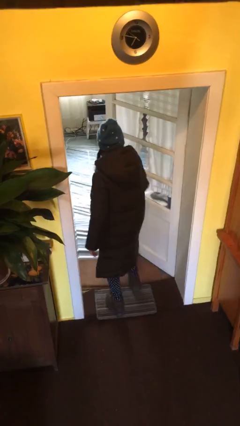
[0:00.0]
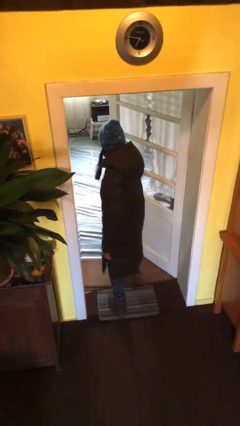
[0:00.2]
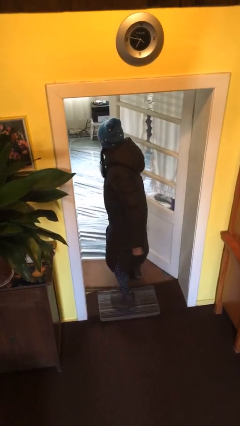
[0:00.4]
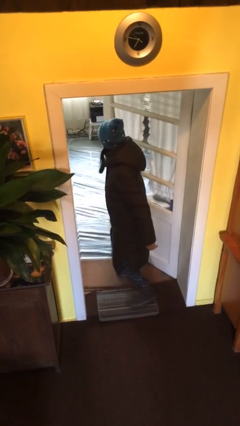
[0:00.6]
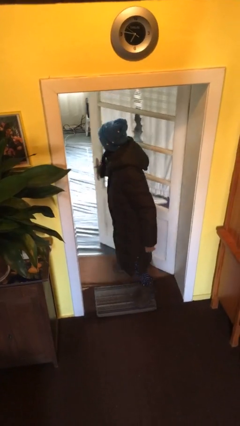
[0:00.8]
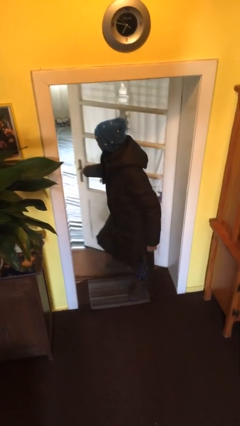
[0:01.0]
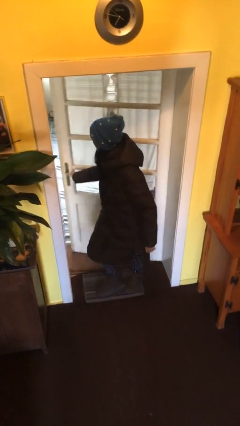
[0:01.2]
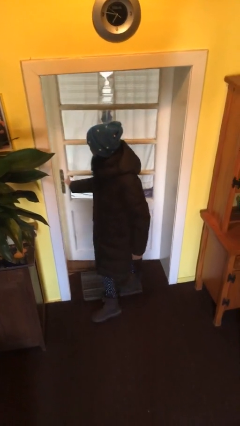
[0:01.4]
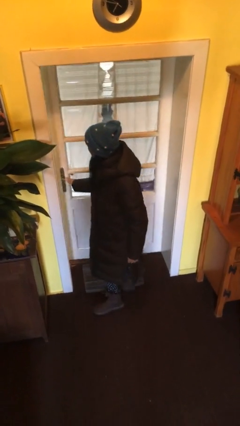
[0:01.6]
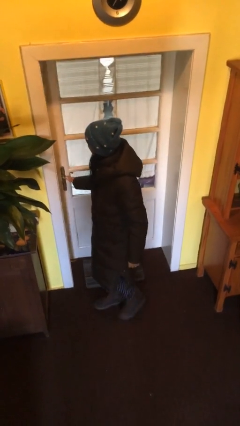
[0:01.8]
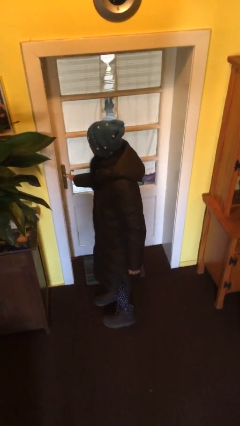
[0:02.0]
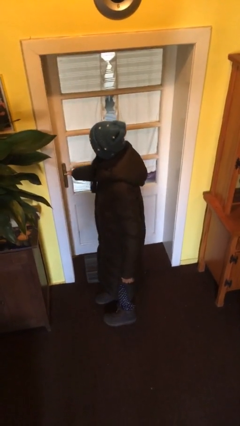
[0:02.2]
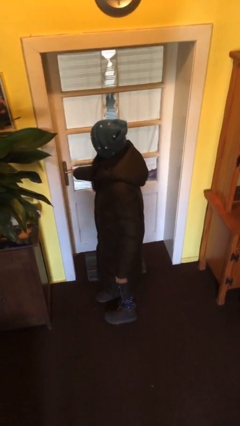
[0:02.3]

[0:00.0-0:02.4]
person closes facility door

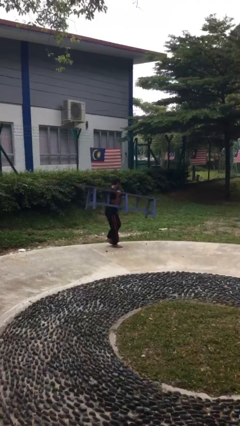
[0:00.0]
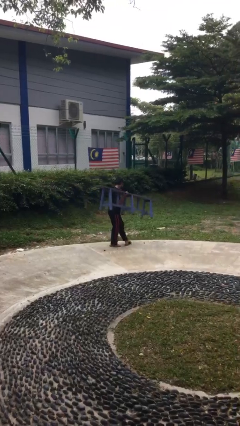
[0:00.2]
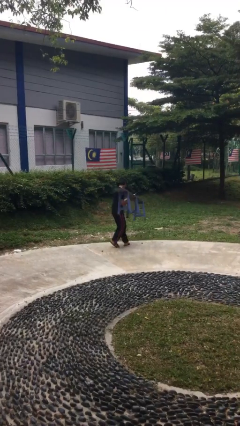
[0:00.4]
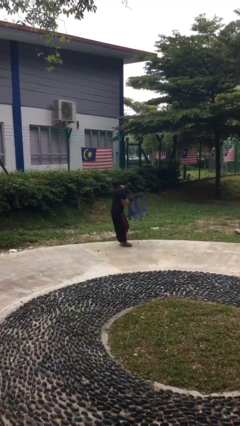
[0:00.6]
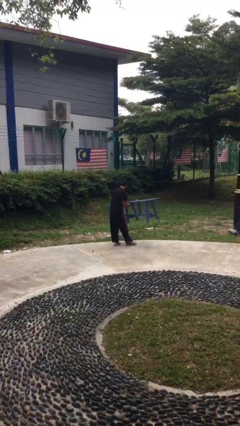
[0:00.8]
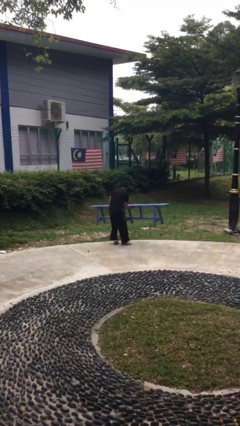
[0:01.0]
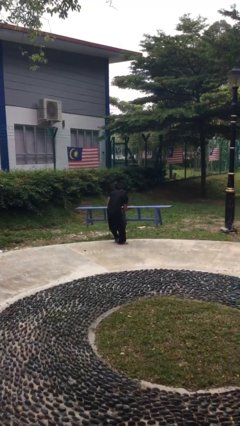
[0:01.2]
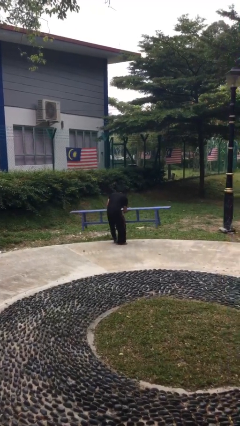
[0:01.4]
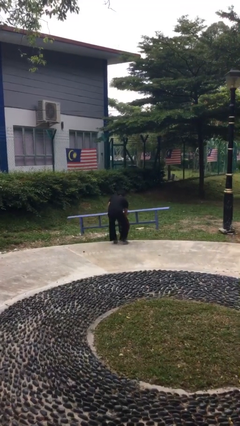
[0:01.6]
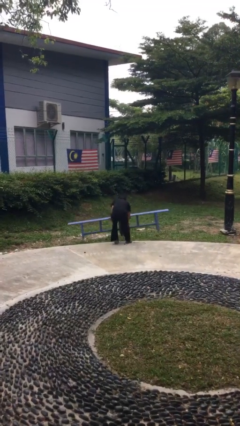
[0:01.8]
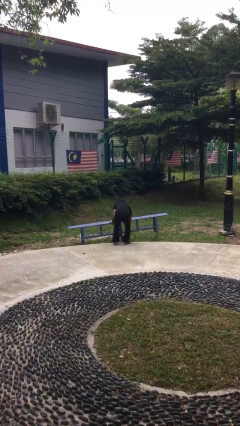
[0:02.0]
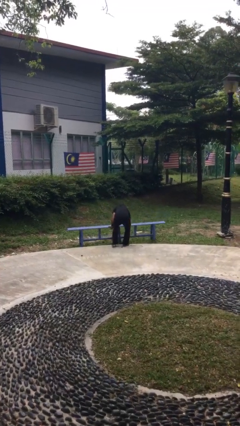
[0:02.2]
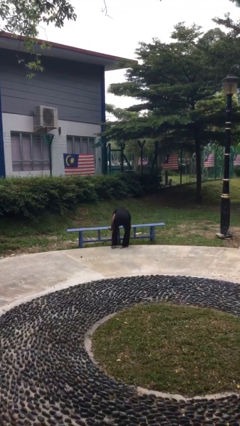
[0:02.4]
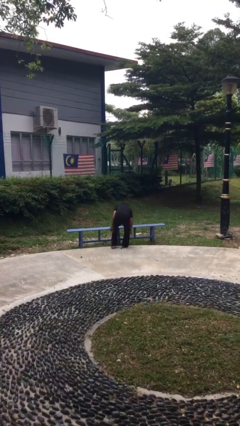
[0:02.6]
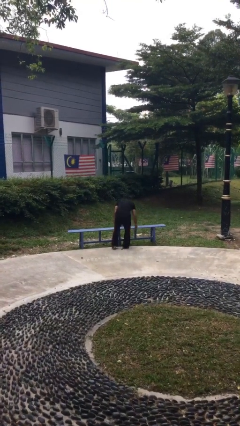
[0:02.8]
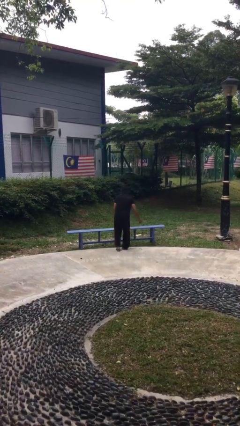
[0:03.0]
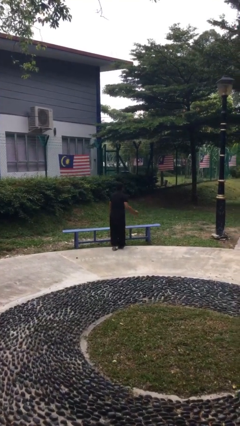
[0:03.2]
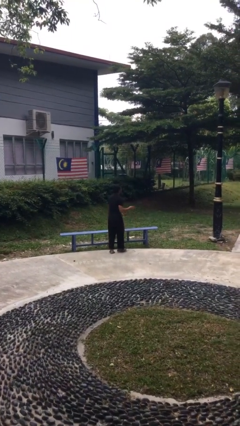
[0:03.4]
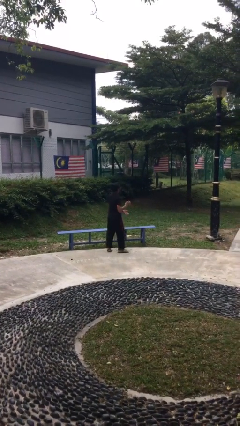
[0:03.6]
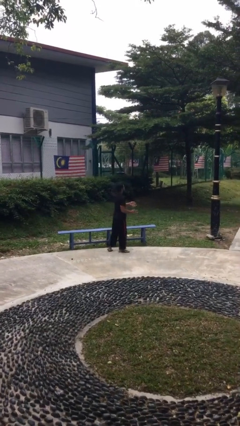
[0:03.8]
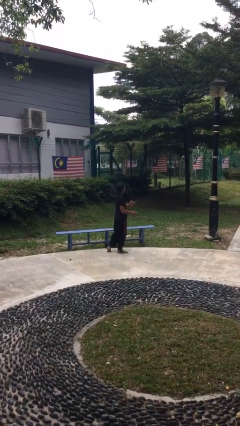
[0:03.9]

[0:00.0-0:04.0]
person puts down object on floor

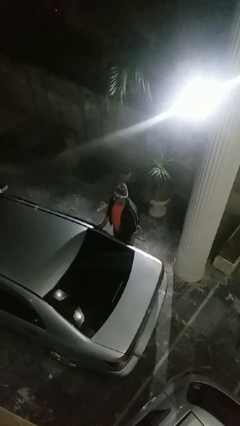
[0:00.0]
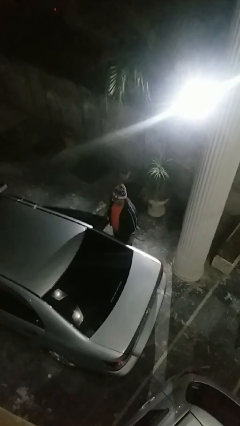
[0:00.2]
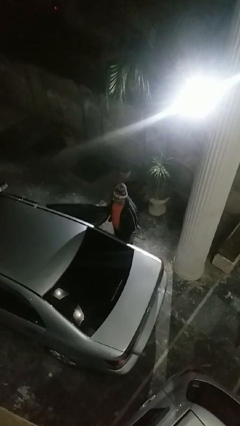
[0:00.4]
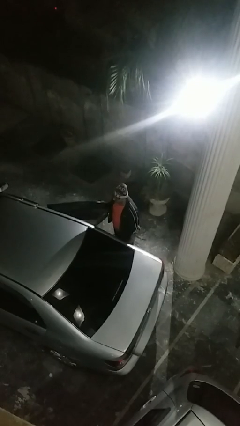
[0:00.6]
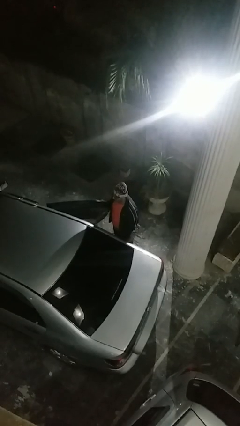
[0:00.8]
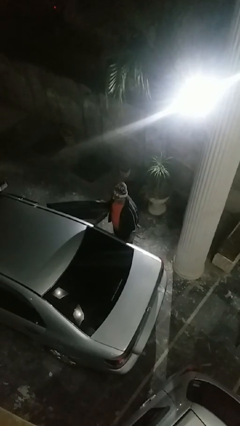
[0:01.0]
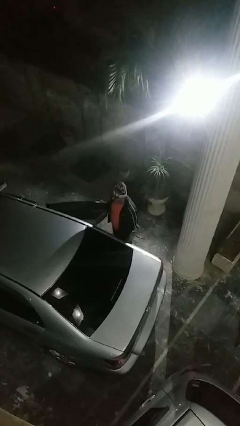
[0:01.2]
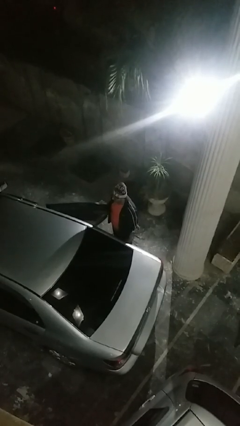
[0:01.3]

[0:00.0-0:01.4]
person opens car door

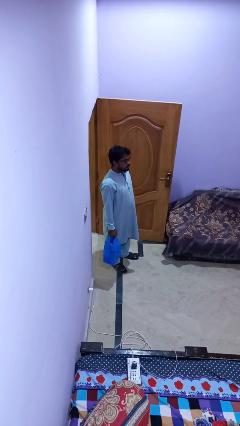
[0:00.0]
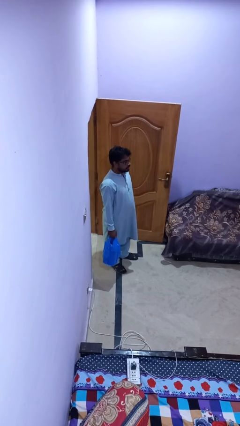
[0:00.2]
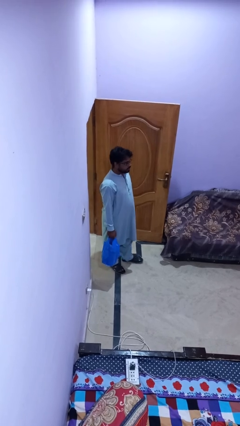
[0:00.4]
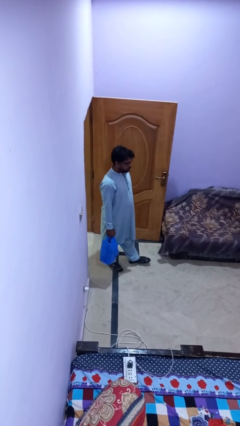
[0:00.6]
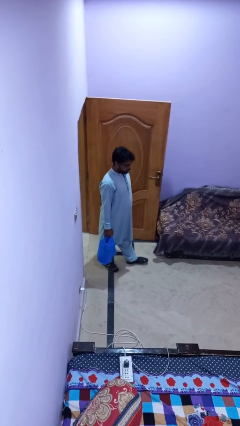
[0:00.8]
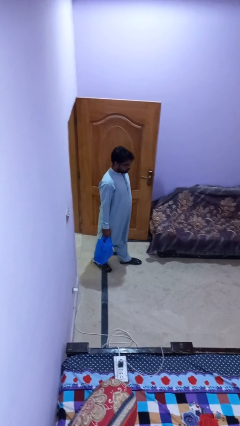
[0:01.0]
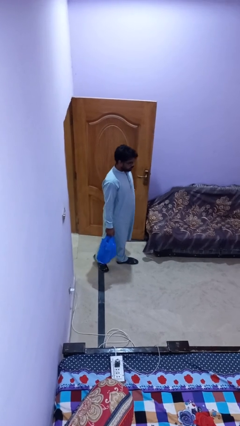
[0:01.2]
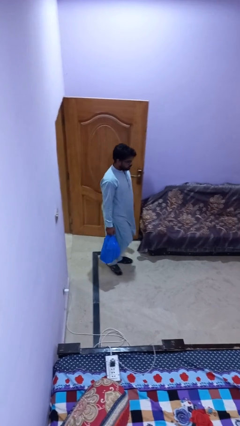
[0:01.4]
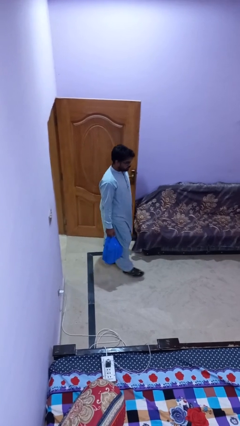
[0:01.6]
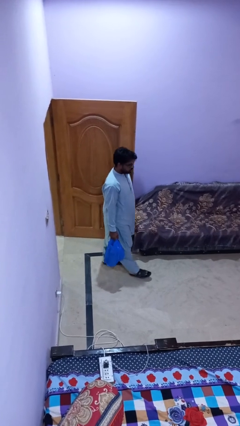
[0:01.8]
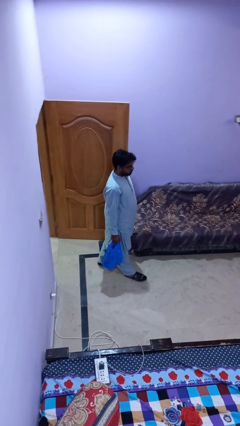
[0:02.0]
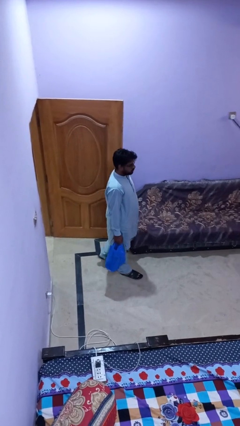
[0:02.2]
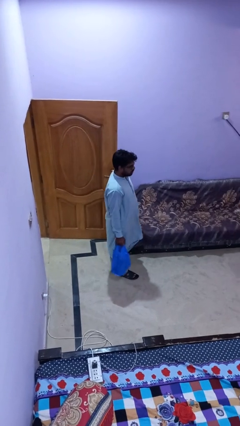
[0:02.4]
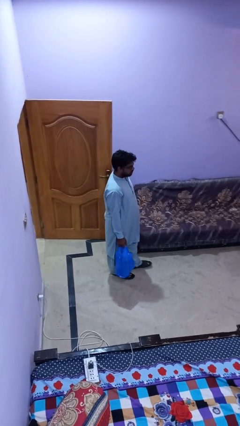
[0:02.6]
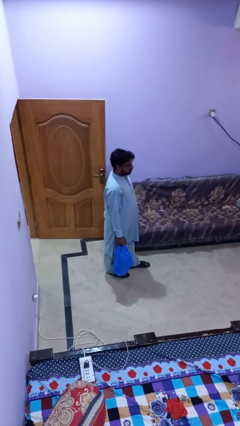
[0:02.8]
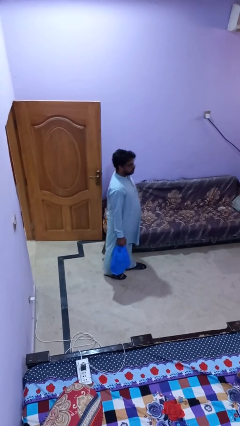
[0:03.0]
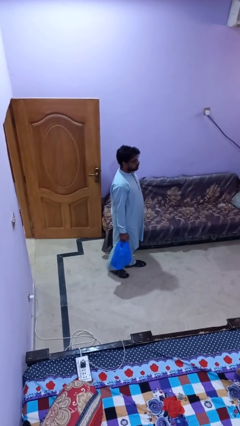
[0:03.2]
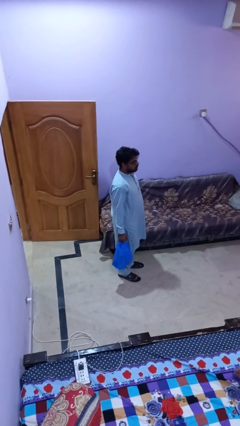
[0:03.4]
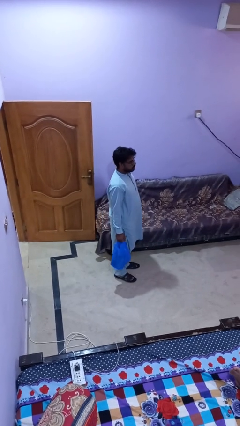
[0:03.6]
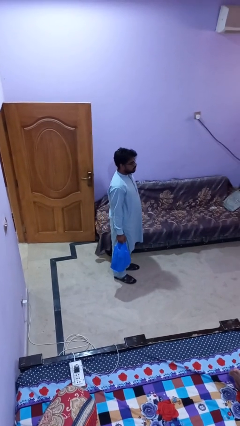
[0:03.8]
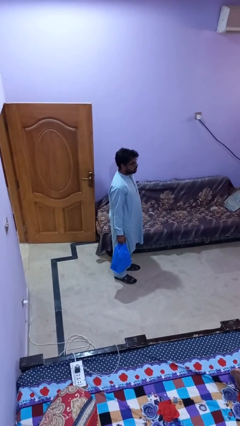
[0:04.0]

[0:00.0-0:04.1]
person carries groceries

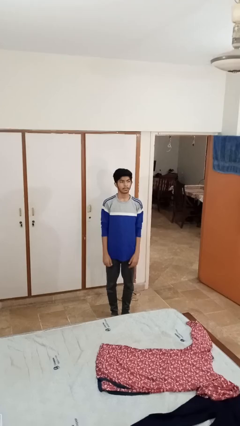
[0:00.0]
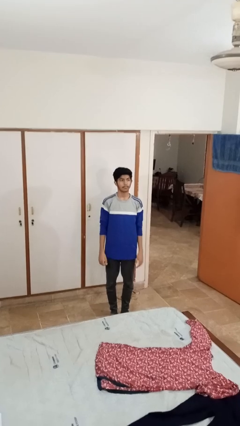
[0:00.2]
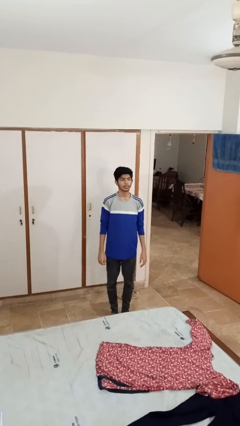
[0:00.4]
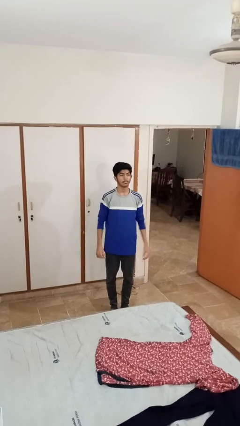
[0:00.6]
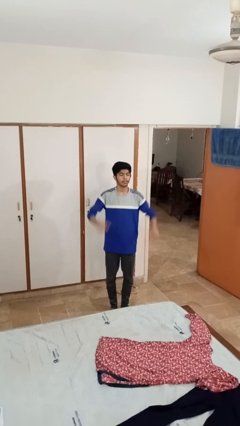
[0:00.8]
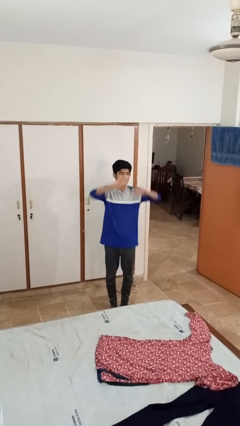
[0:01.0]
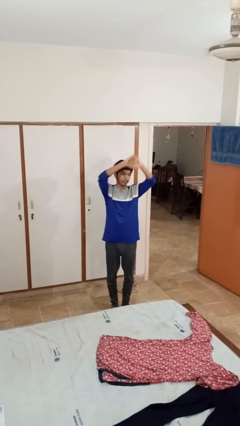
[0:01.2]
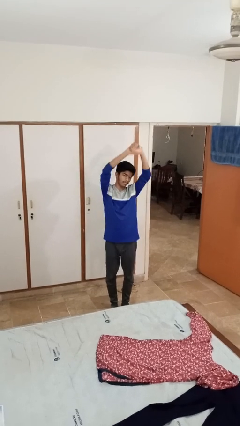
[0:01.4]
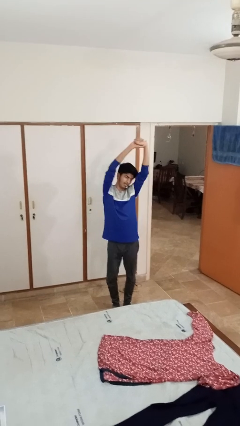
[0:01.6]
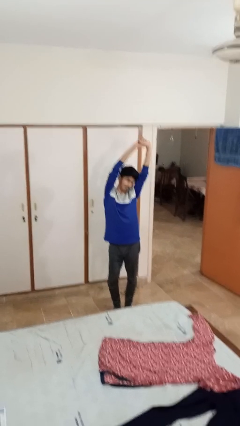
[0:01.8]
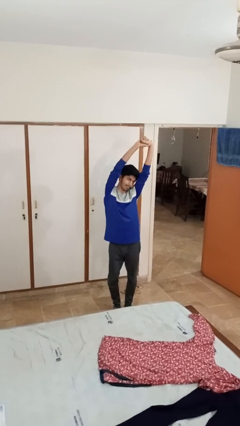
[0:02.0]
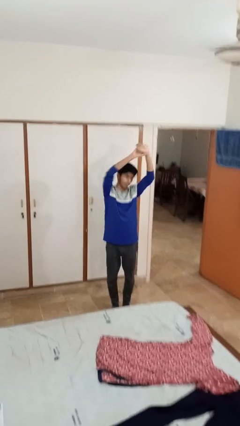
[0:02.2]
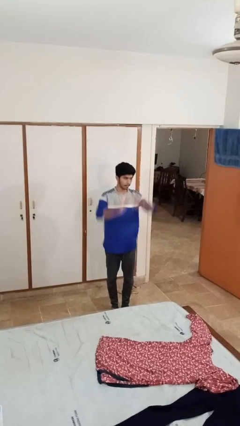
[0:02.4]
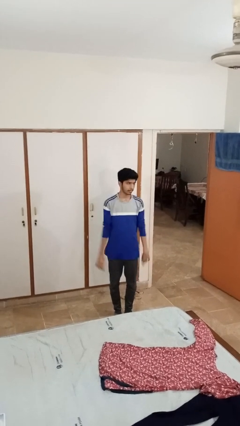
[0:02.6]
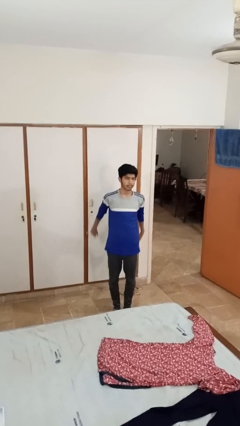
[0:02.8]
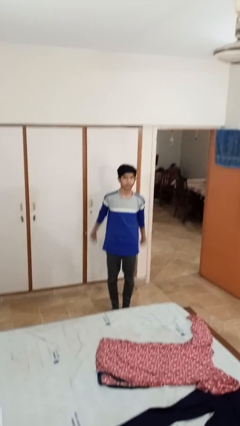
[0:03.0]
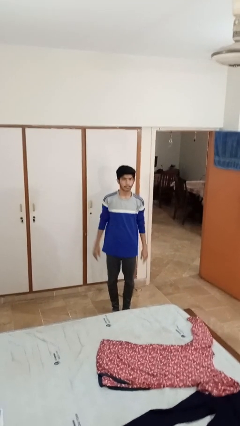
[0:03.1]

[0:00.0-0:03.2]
person stretches arms over head

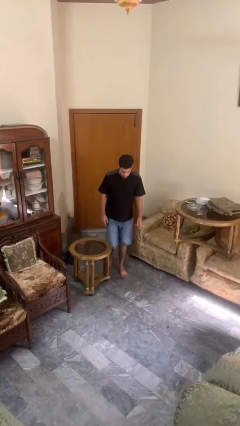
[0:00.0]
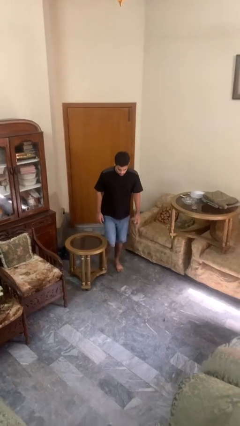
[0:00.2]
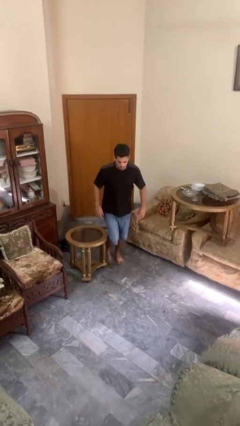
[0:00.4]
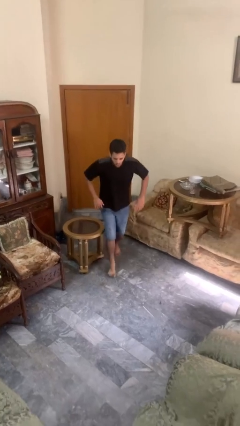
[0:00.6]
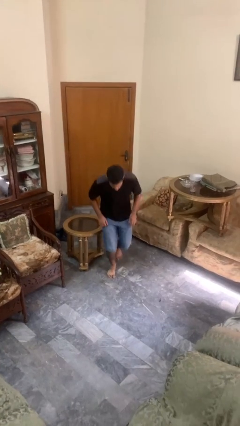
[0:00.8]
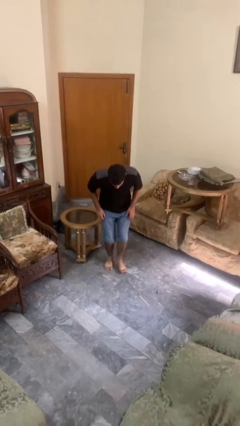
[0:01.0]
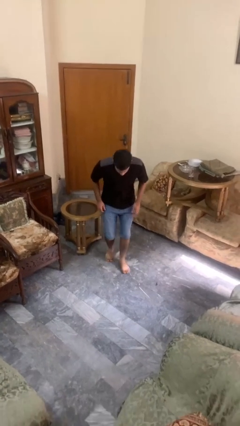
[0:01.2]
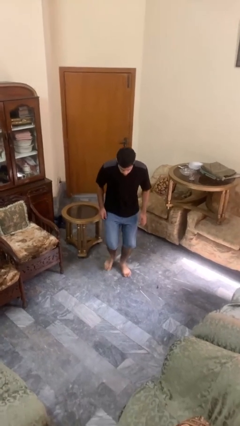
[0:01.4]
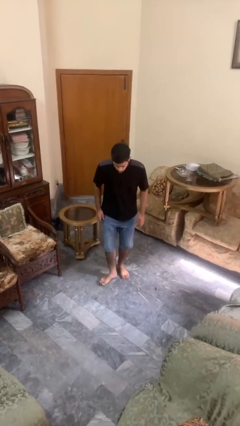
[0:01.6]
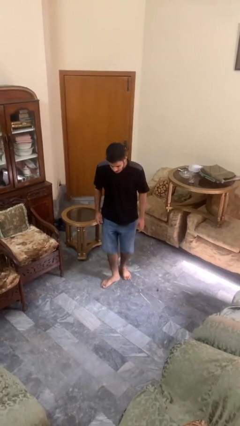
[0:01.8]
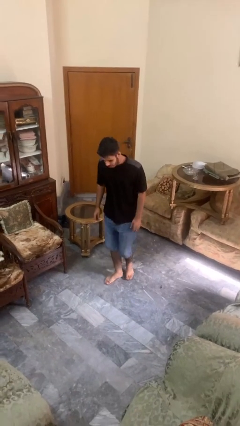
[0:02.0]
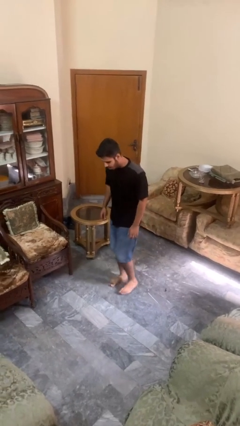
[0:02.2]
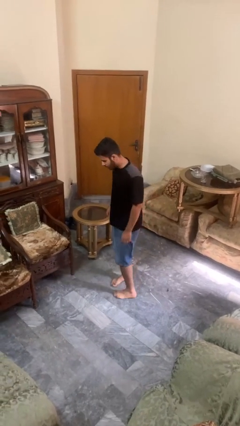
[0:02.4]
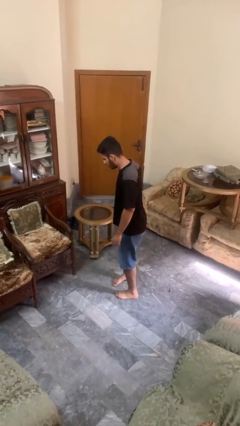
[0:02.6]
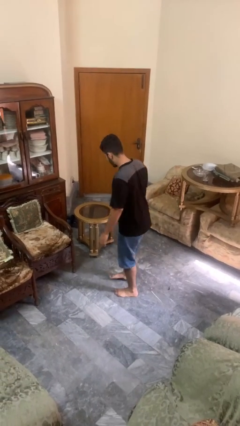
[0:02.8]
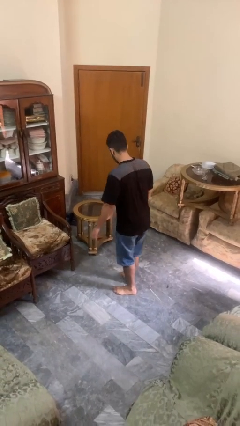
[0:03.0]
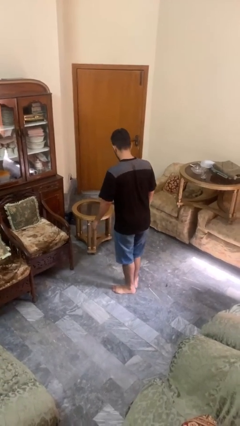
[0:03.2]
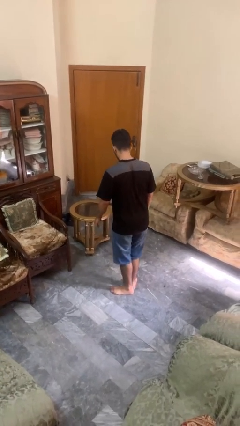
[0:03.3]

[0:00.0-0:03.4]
person stubs toe
